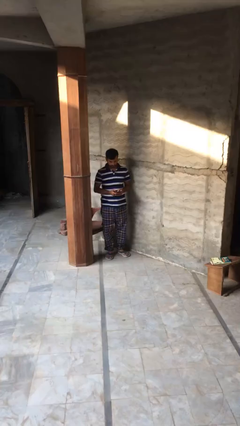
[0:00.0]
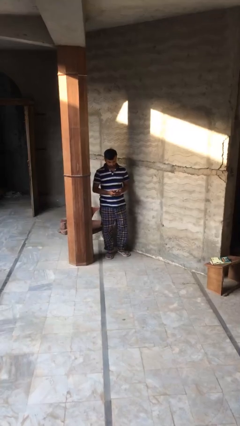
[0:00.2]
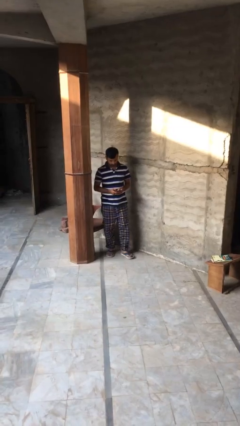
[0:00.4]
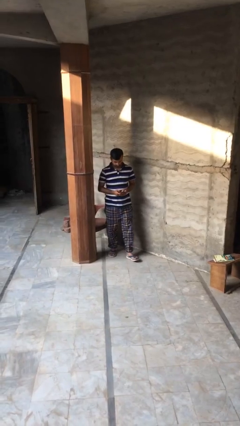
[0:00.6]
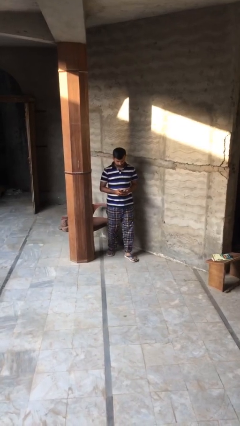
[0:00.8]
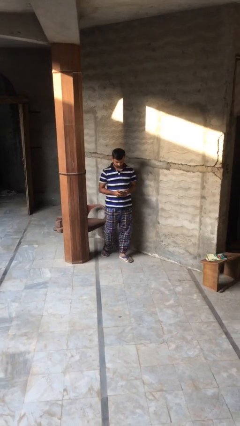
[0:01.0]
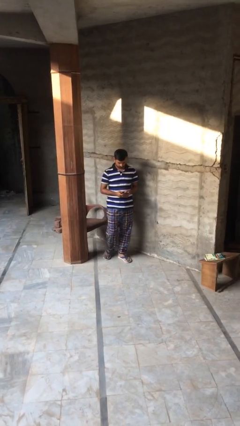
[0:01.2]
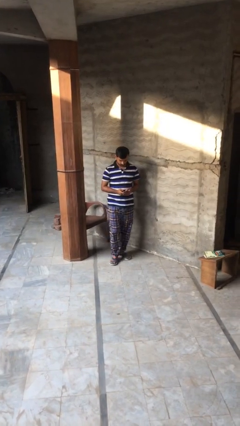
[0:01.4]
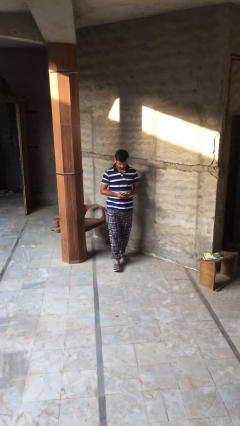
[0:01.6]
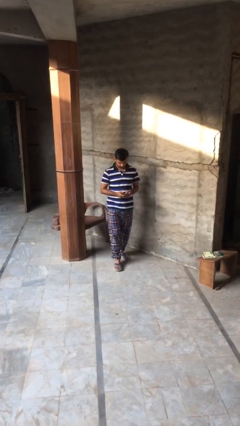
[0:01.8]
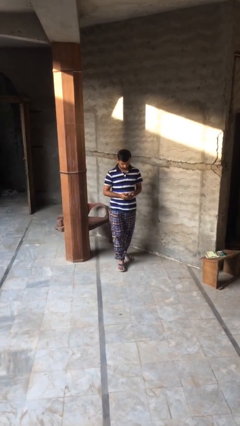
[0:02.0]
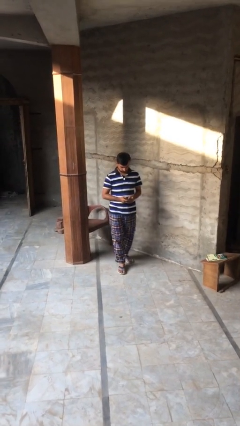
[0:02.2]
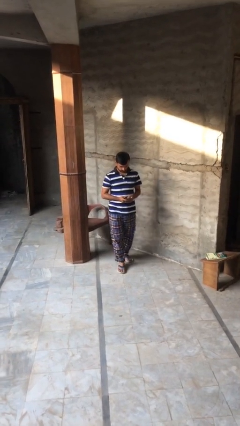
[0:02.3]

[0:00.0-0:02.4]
person texts on phone

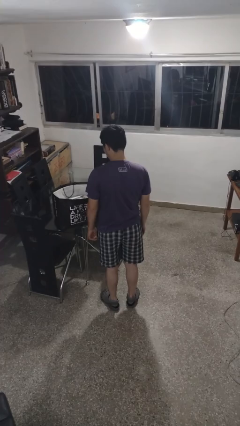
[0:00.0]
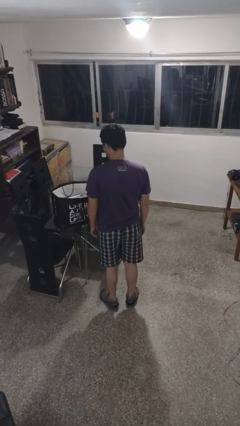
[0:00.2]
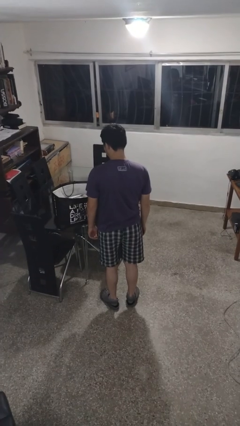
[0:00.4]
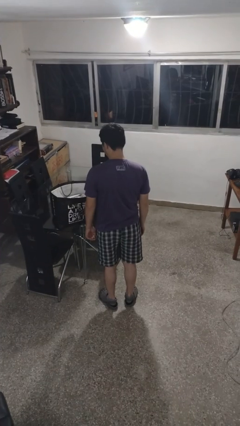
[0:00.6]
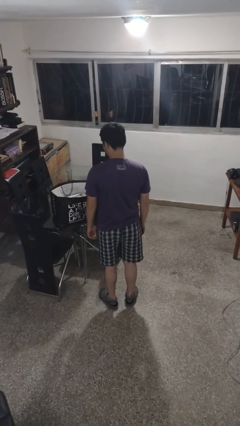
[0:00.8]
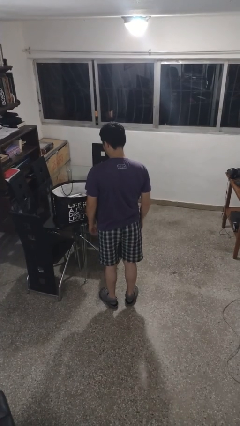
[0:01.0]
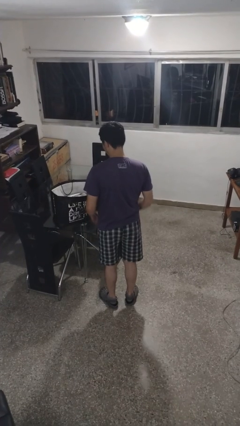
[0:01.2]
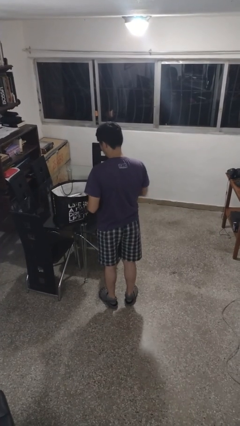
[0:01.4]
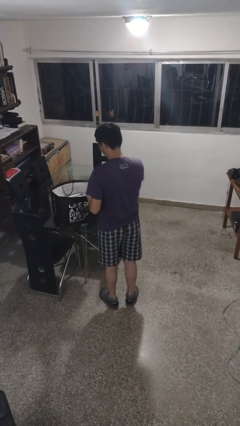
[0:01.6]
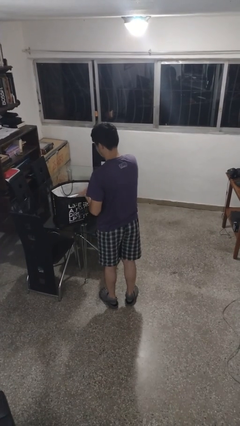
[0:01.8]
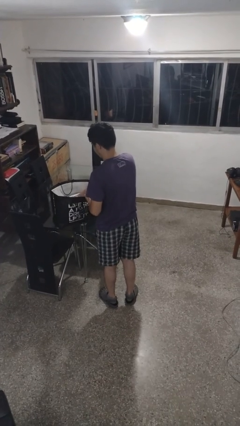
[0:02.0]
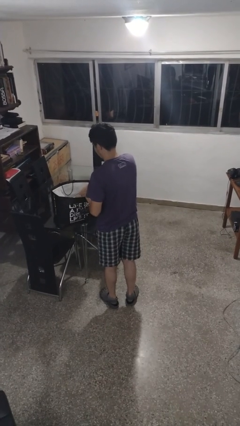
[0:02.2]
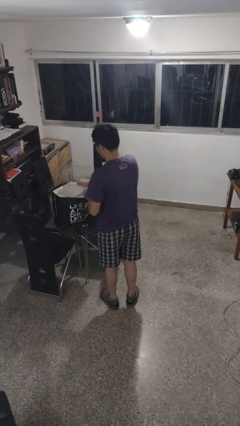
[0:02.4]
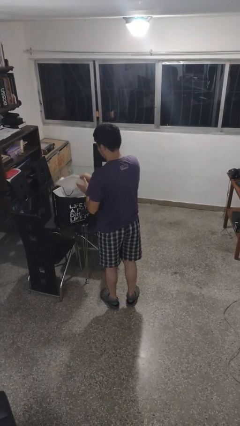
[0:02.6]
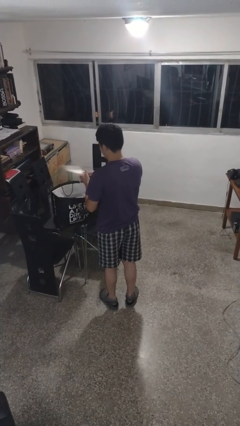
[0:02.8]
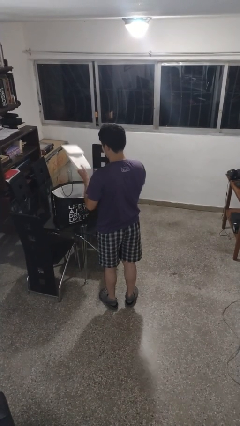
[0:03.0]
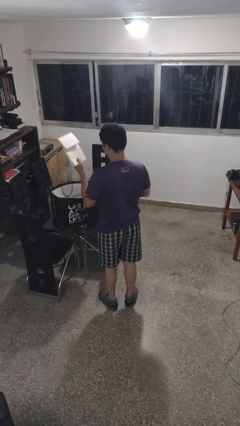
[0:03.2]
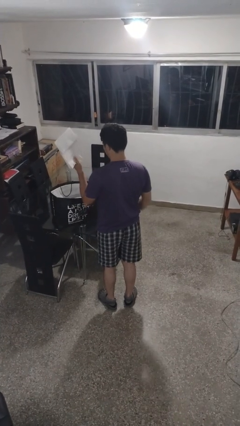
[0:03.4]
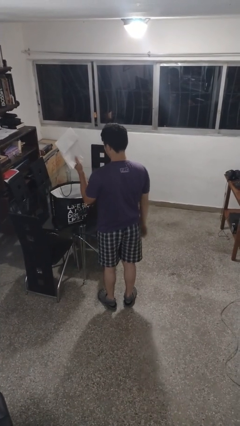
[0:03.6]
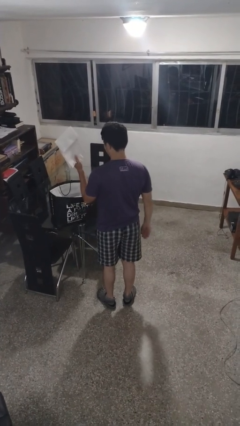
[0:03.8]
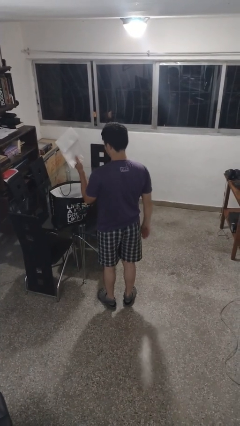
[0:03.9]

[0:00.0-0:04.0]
person takes object from bag

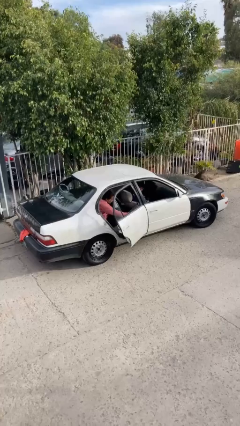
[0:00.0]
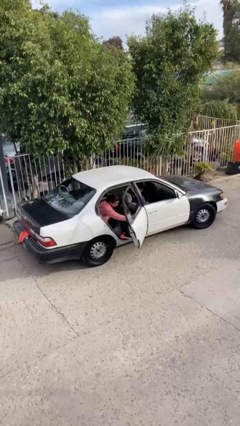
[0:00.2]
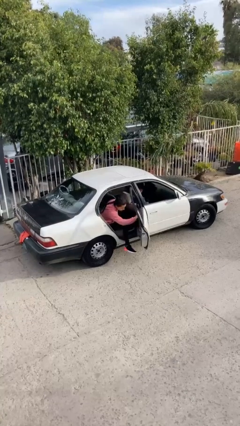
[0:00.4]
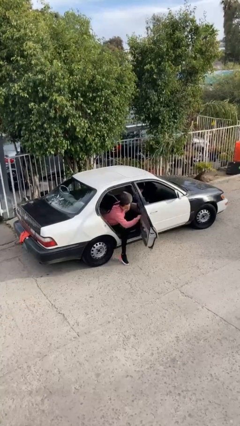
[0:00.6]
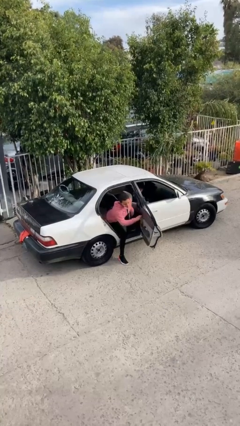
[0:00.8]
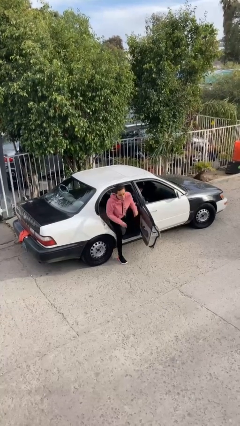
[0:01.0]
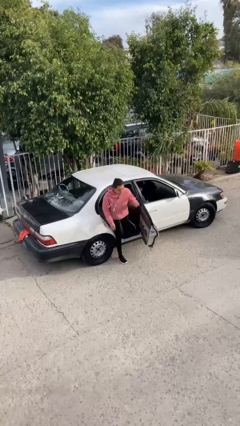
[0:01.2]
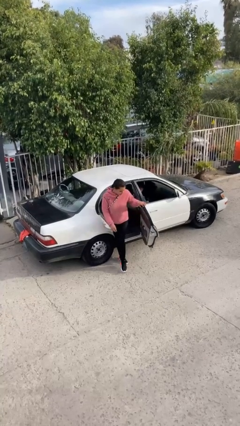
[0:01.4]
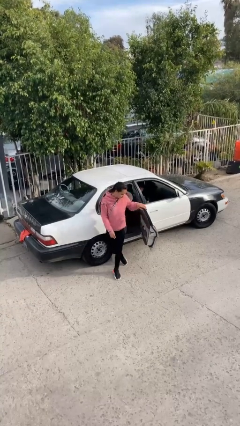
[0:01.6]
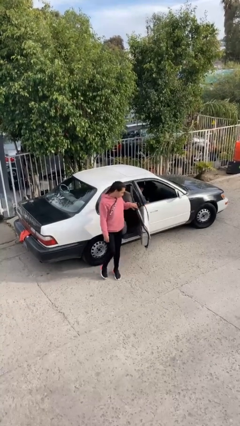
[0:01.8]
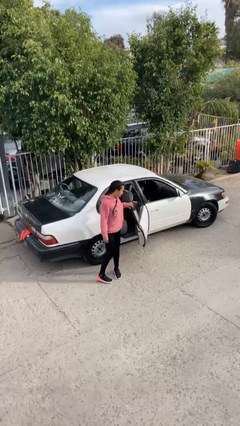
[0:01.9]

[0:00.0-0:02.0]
car drops off person

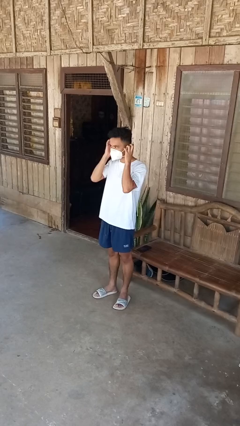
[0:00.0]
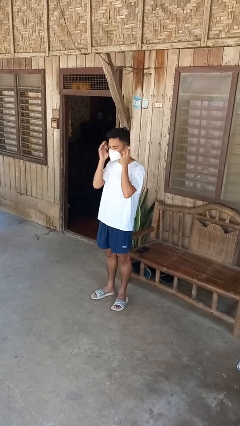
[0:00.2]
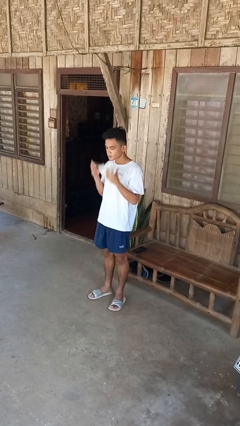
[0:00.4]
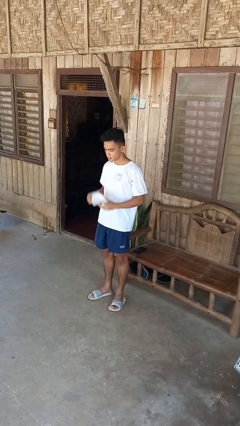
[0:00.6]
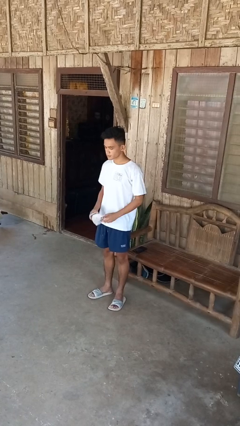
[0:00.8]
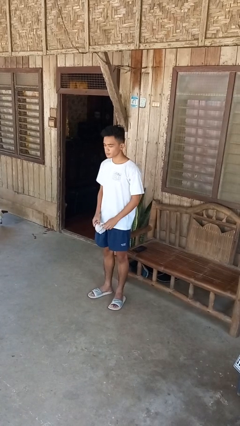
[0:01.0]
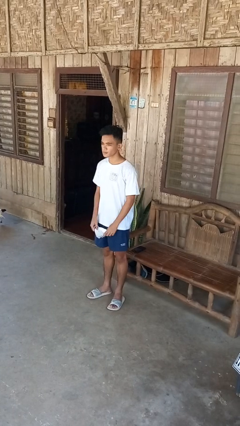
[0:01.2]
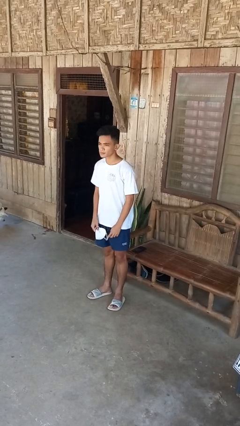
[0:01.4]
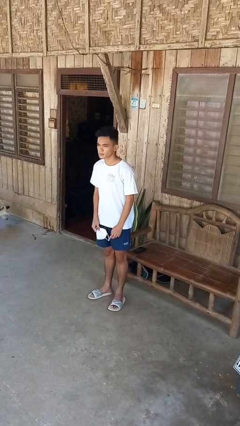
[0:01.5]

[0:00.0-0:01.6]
person takes off facemask

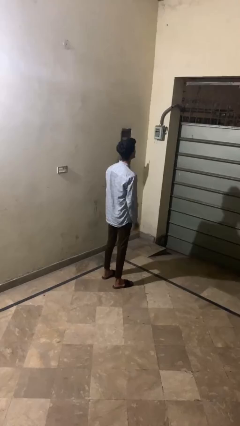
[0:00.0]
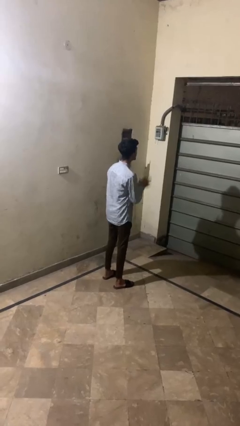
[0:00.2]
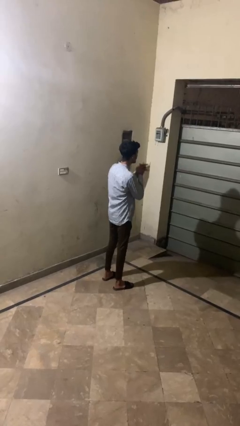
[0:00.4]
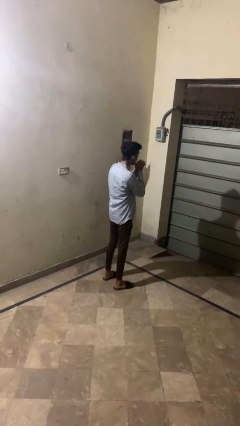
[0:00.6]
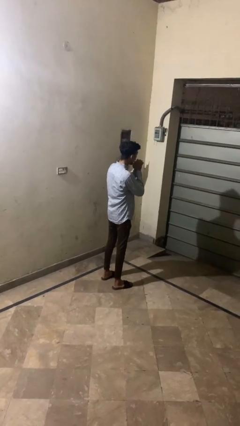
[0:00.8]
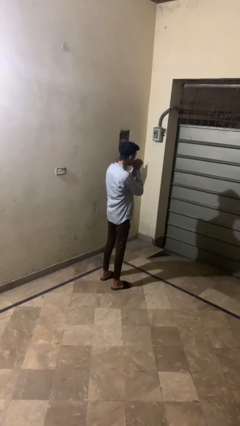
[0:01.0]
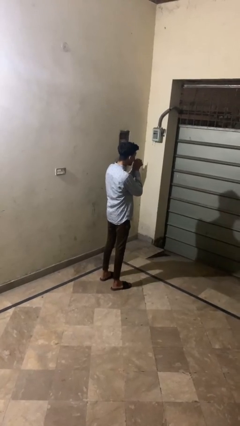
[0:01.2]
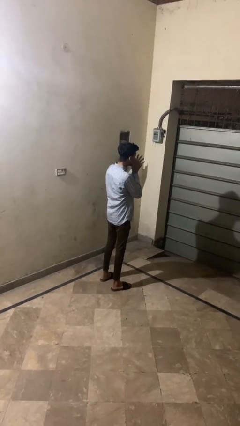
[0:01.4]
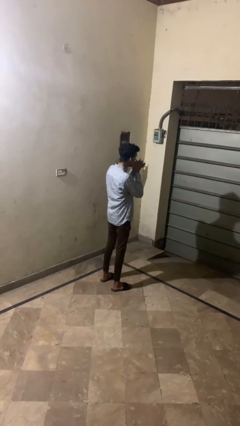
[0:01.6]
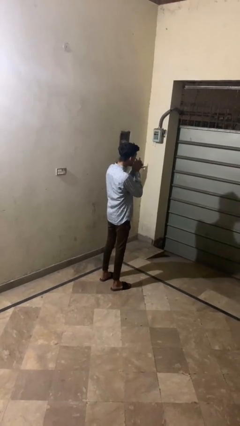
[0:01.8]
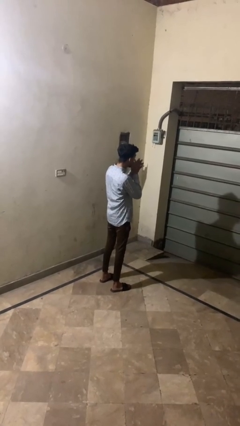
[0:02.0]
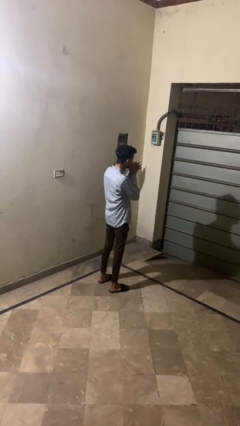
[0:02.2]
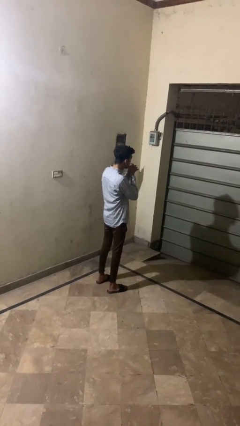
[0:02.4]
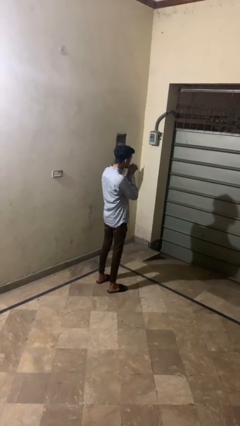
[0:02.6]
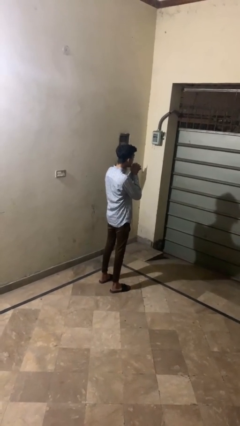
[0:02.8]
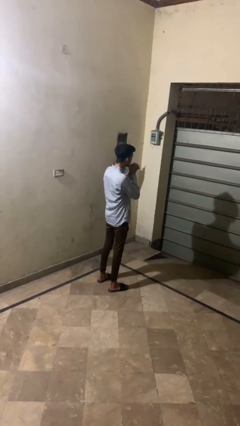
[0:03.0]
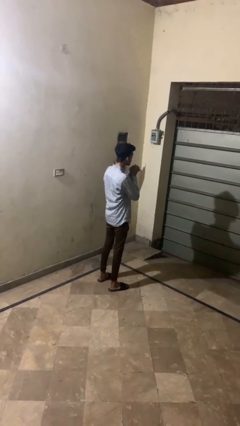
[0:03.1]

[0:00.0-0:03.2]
person blows into hands

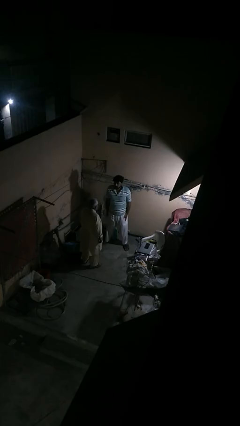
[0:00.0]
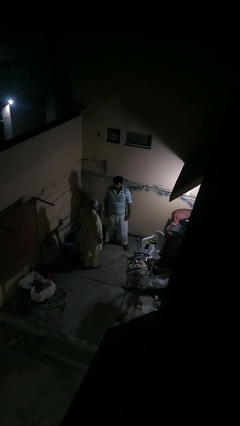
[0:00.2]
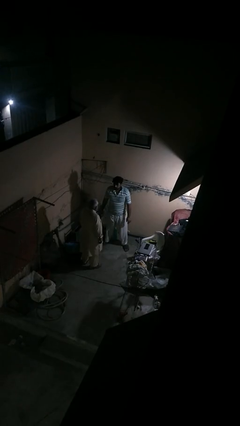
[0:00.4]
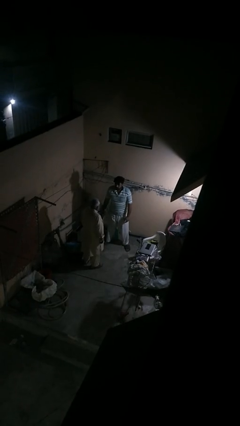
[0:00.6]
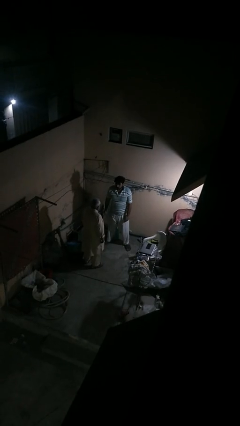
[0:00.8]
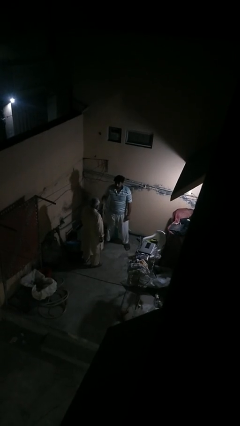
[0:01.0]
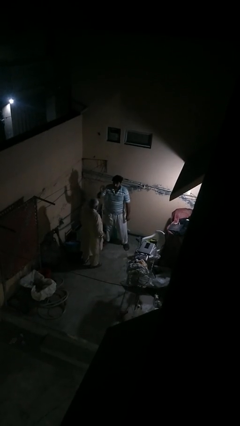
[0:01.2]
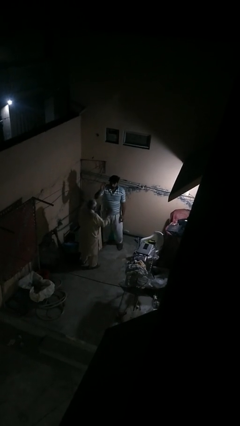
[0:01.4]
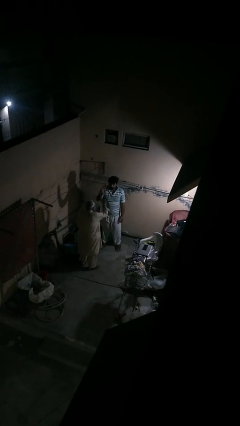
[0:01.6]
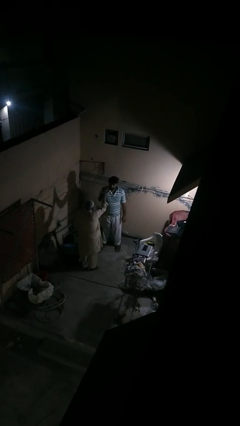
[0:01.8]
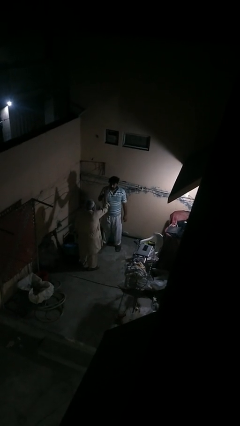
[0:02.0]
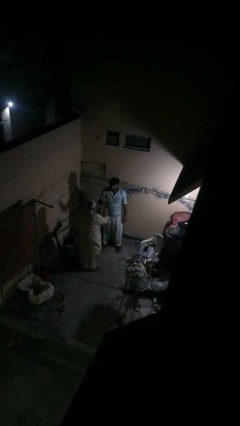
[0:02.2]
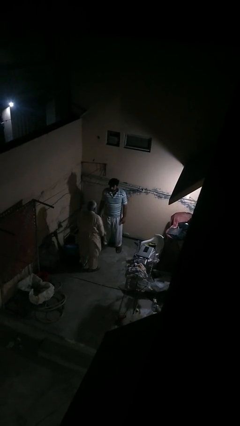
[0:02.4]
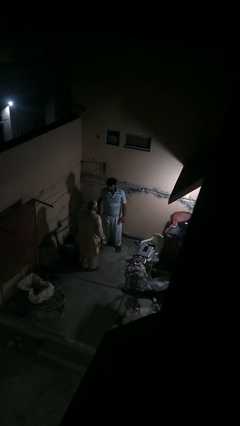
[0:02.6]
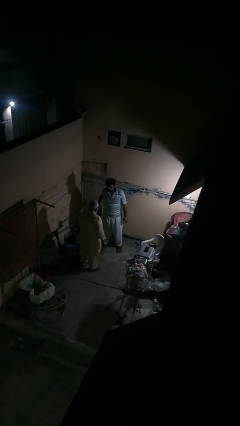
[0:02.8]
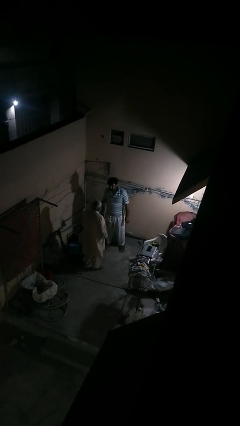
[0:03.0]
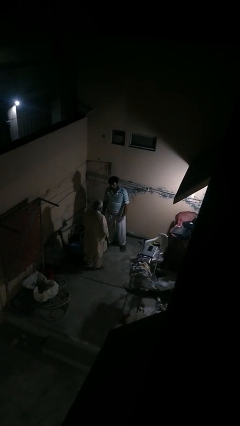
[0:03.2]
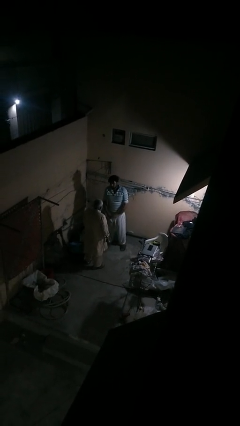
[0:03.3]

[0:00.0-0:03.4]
person highfives hand

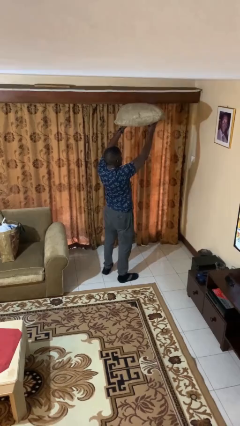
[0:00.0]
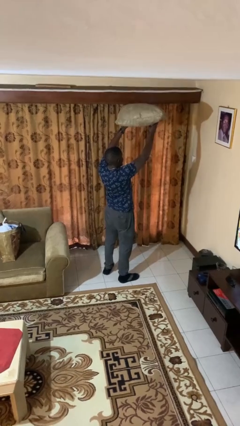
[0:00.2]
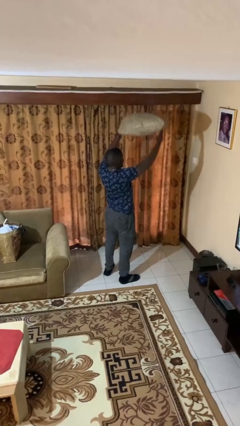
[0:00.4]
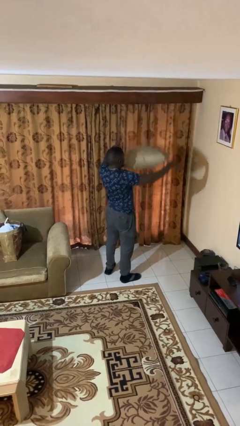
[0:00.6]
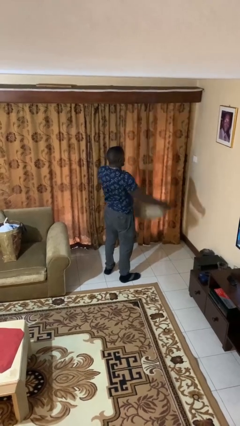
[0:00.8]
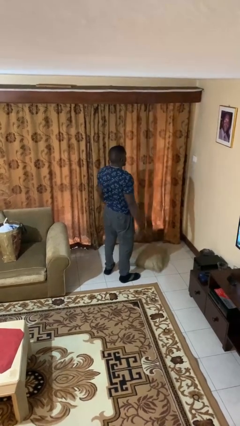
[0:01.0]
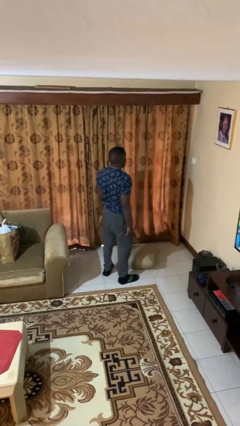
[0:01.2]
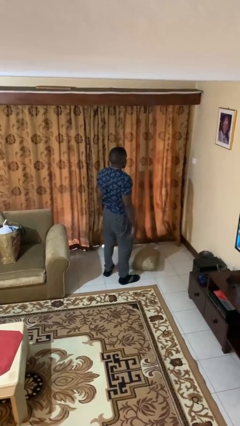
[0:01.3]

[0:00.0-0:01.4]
person drops object
